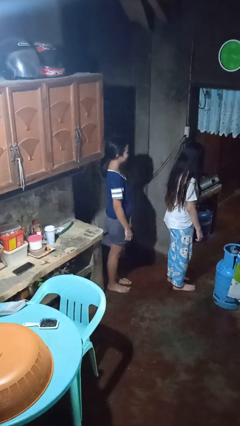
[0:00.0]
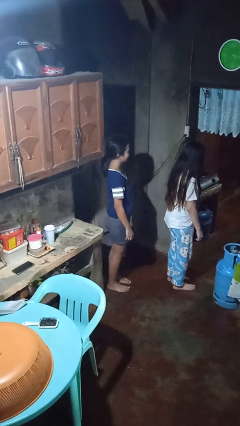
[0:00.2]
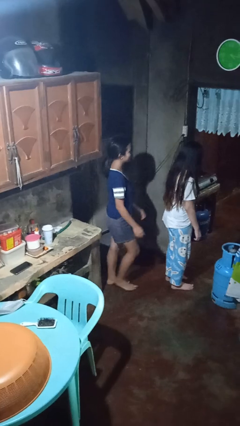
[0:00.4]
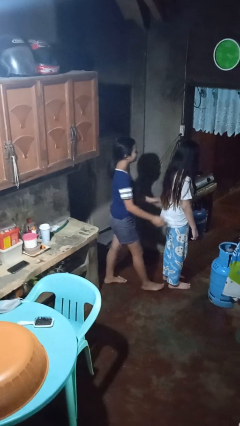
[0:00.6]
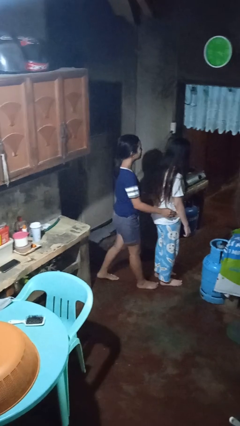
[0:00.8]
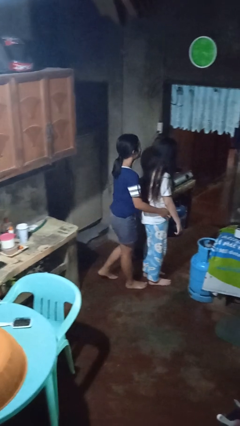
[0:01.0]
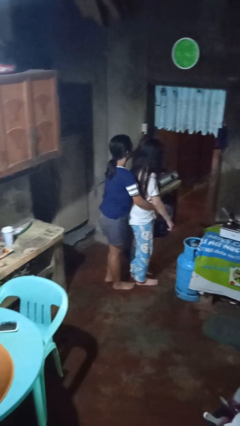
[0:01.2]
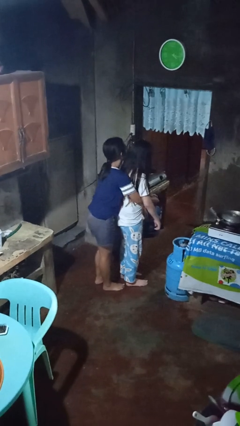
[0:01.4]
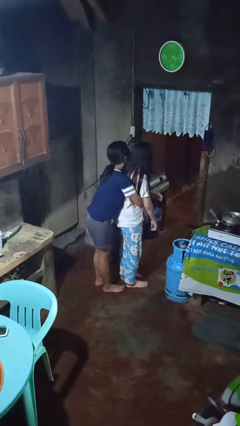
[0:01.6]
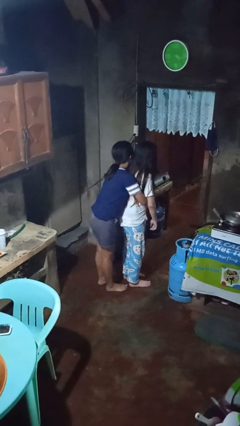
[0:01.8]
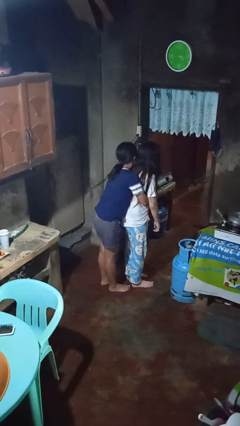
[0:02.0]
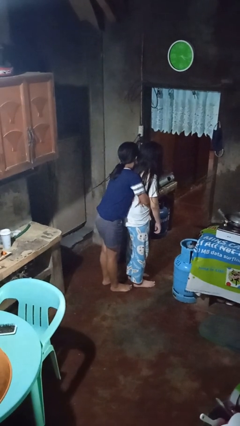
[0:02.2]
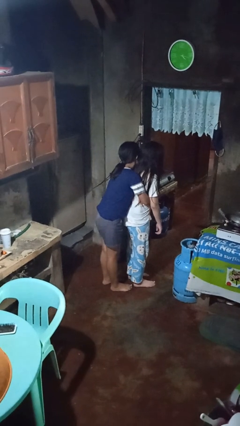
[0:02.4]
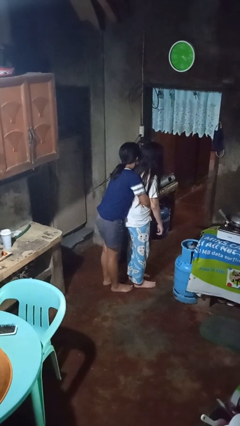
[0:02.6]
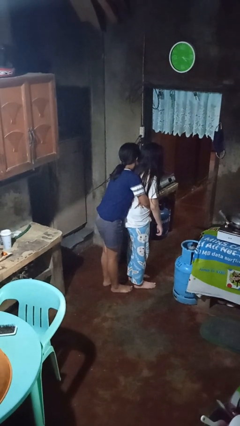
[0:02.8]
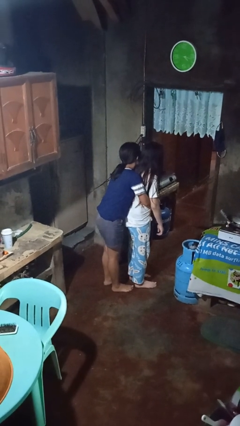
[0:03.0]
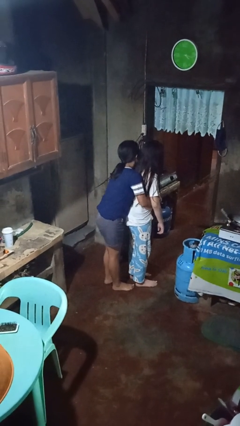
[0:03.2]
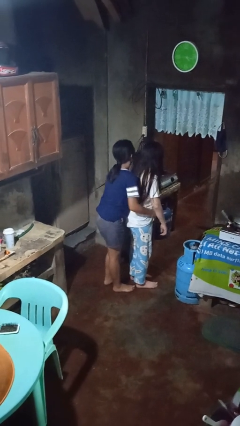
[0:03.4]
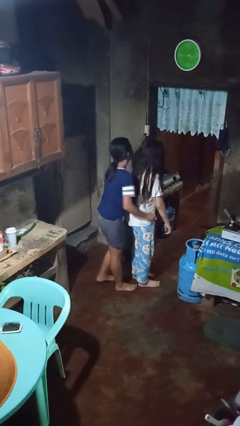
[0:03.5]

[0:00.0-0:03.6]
person hugs person from behind

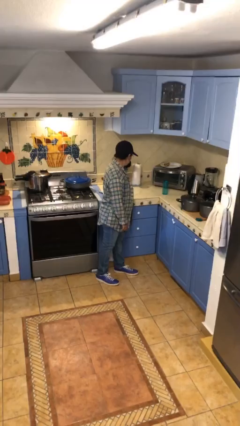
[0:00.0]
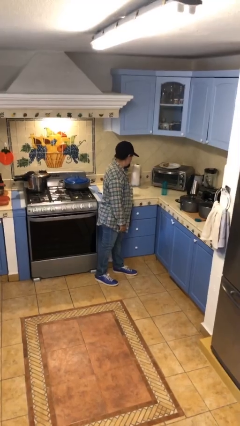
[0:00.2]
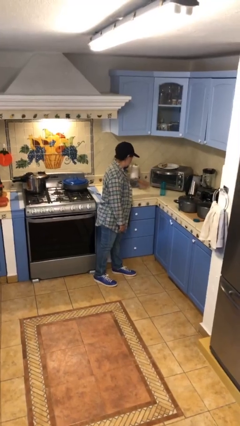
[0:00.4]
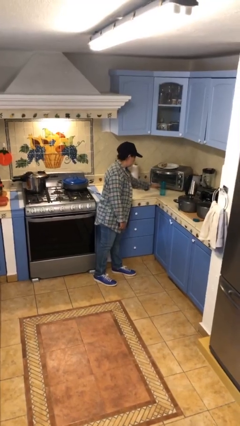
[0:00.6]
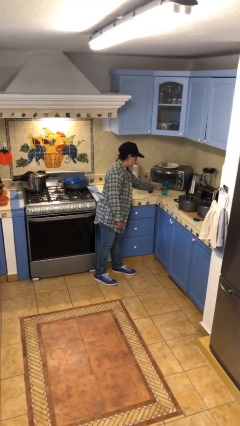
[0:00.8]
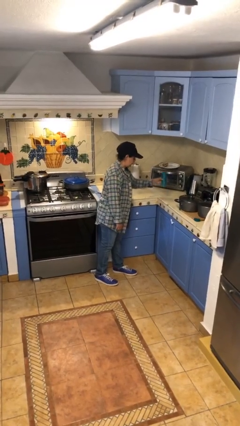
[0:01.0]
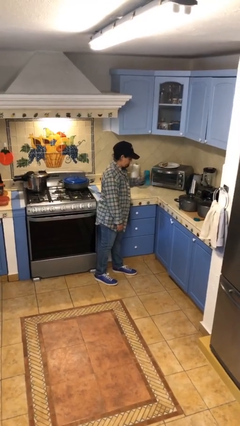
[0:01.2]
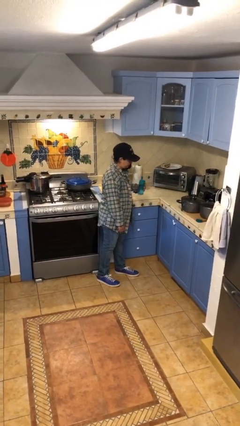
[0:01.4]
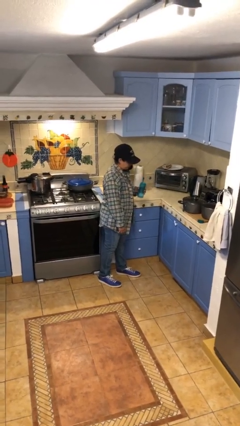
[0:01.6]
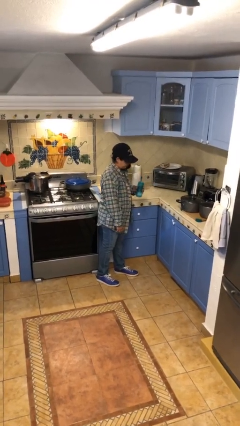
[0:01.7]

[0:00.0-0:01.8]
person picks up object from countertop

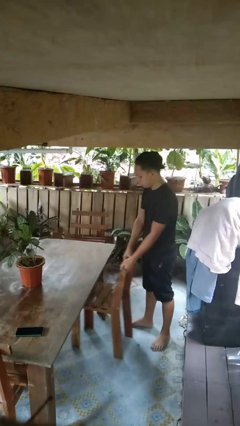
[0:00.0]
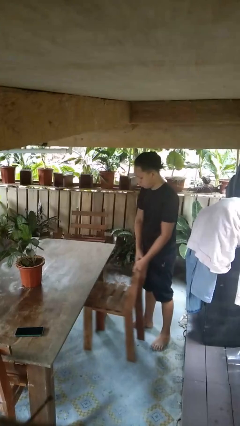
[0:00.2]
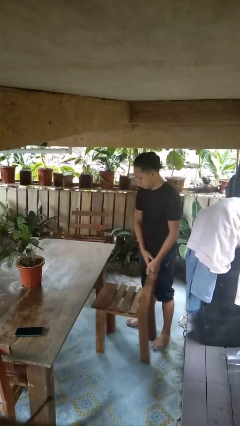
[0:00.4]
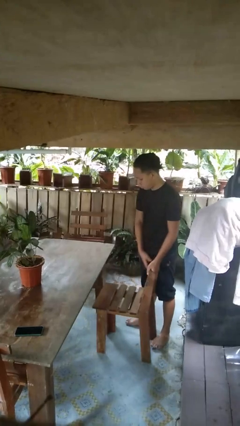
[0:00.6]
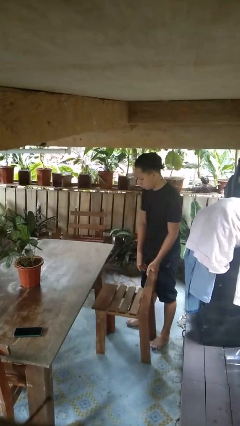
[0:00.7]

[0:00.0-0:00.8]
person pulls out chair

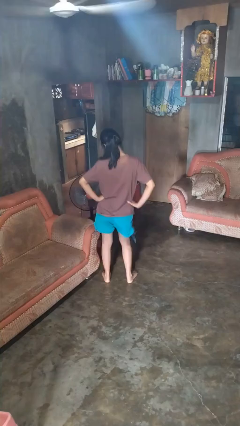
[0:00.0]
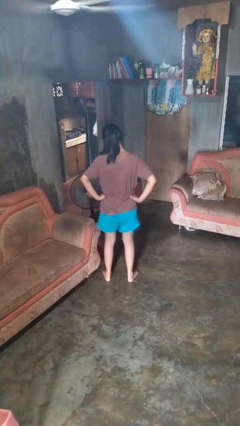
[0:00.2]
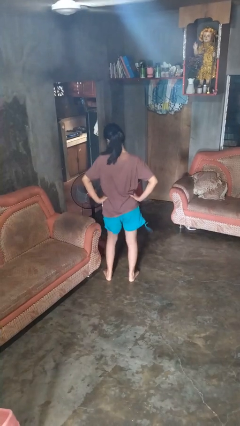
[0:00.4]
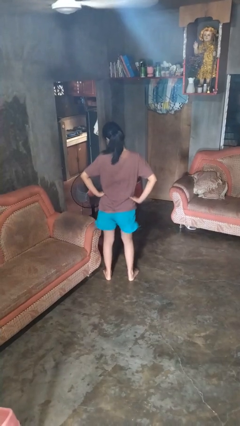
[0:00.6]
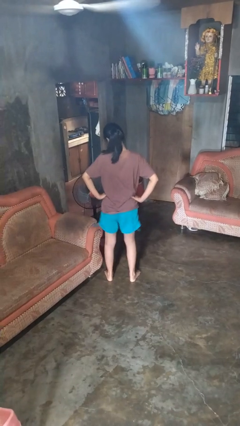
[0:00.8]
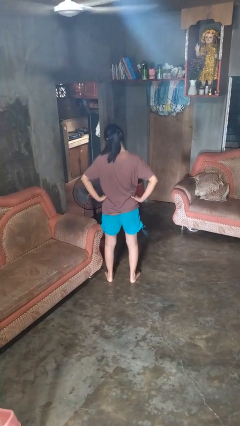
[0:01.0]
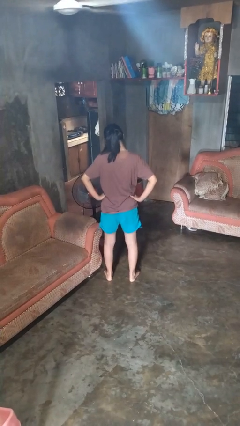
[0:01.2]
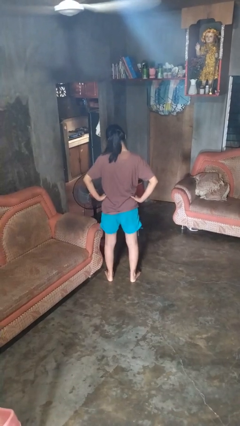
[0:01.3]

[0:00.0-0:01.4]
person wiggles hips

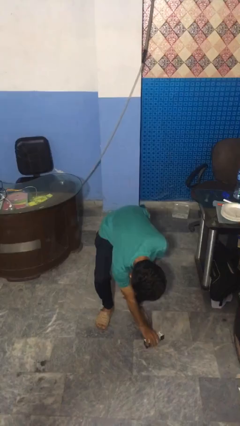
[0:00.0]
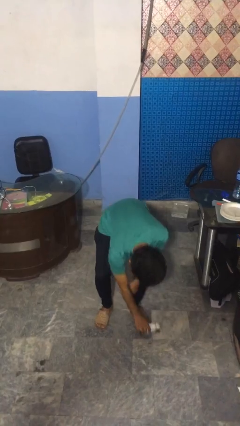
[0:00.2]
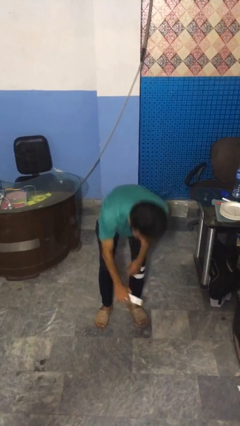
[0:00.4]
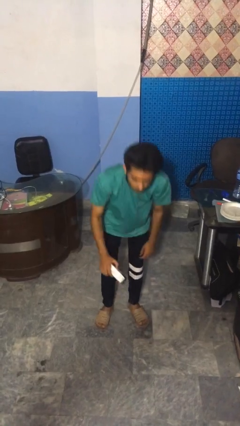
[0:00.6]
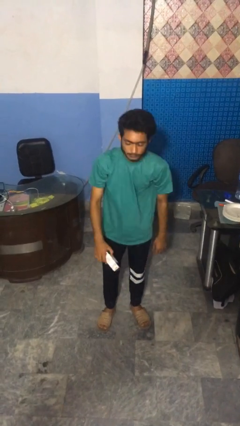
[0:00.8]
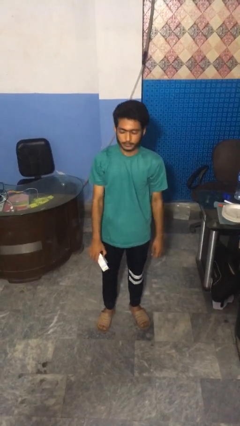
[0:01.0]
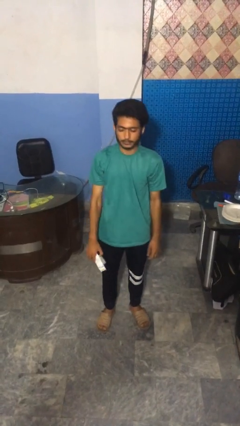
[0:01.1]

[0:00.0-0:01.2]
person picks up object from floor

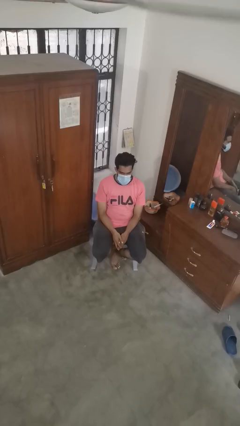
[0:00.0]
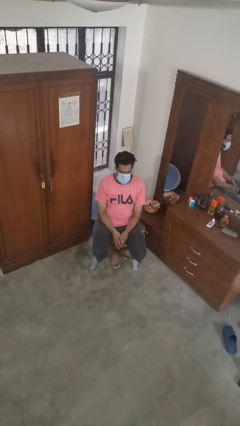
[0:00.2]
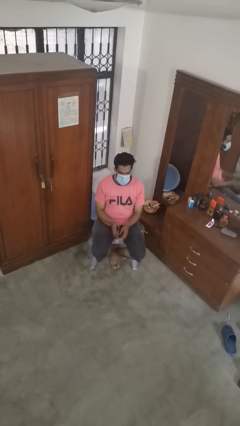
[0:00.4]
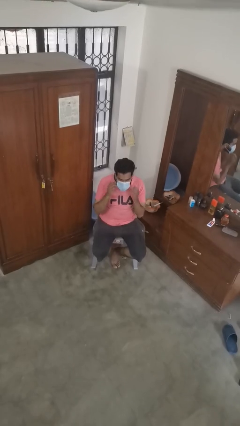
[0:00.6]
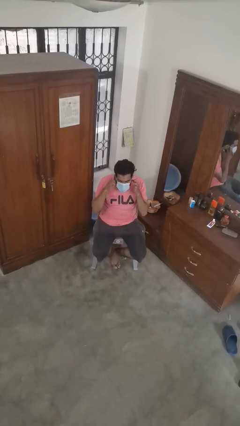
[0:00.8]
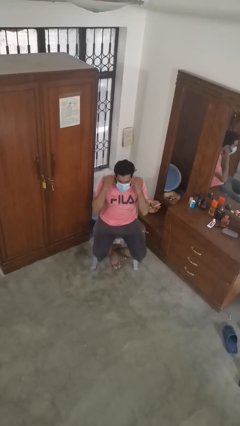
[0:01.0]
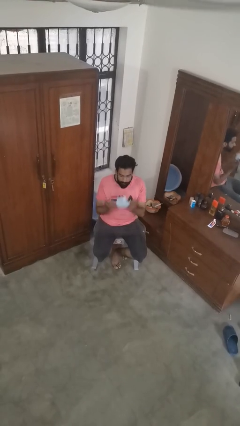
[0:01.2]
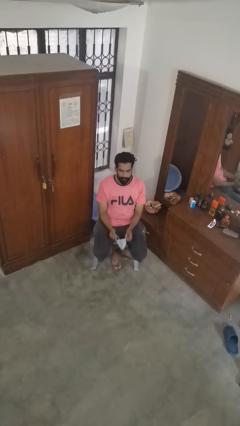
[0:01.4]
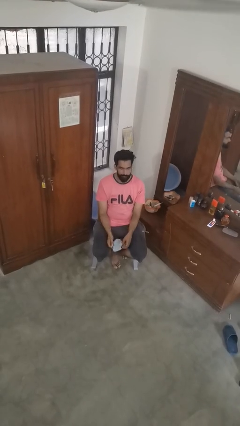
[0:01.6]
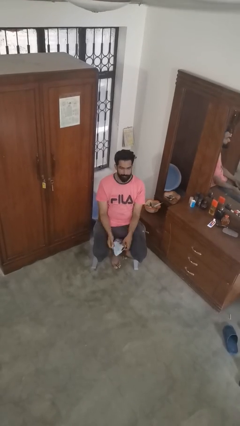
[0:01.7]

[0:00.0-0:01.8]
person takes off facemask

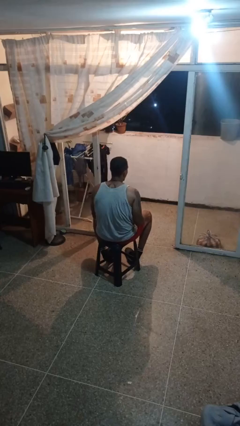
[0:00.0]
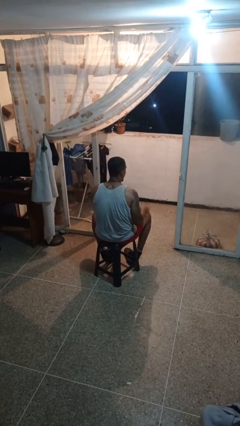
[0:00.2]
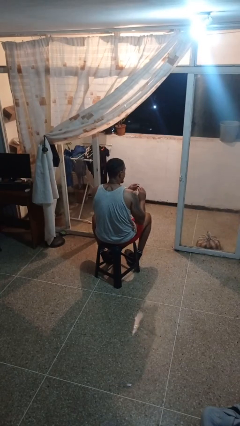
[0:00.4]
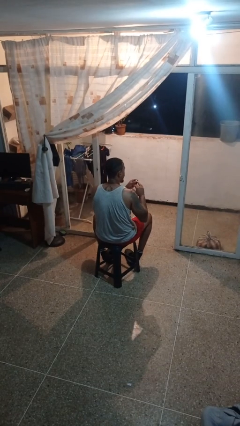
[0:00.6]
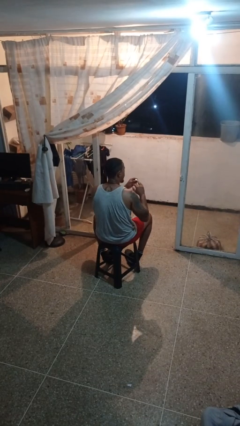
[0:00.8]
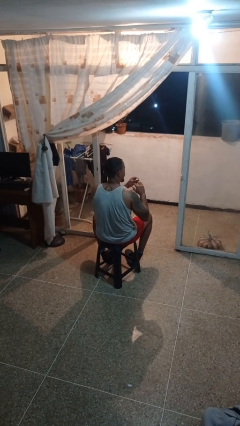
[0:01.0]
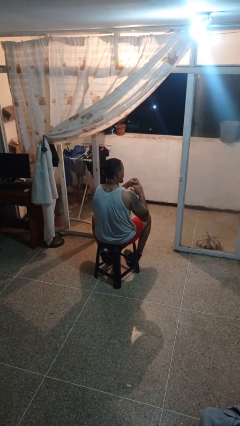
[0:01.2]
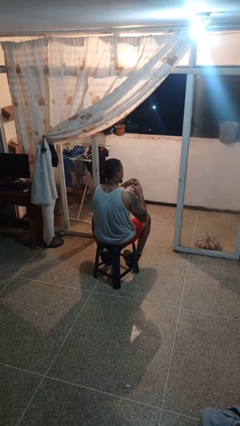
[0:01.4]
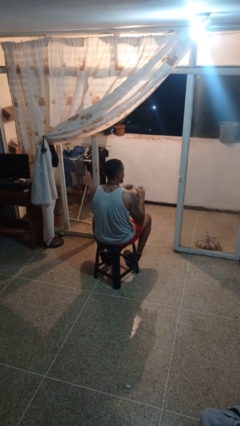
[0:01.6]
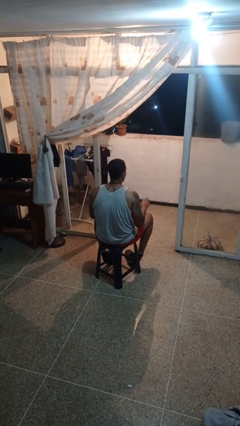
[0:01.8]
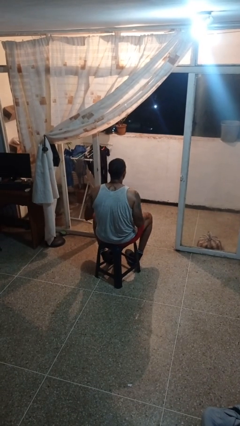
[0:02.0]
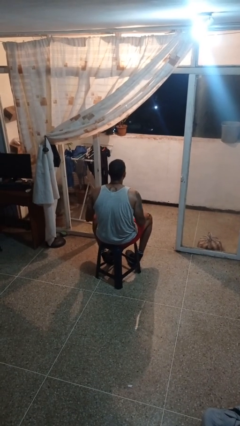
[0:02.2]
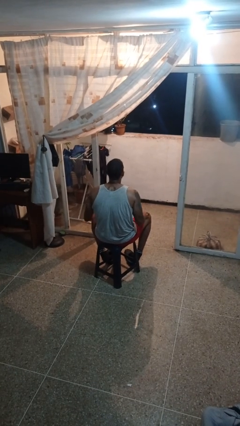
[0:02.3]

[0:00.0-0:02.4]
person puts on ring

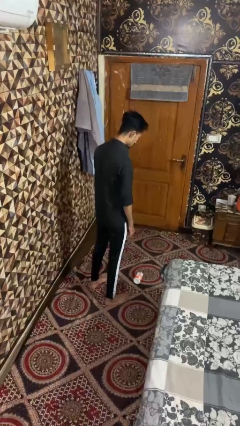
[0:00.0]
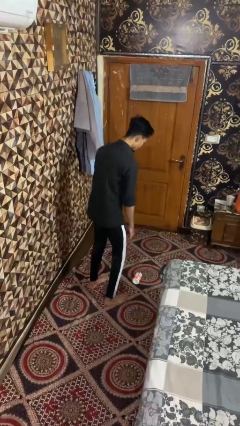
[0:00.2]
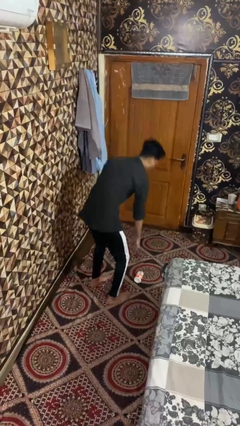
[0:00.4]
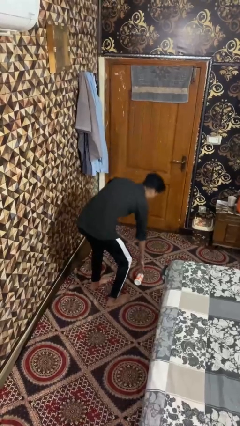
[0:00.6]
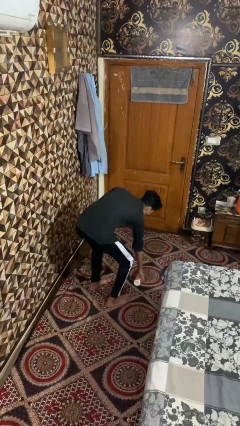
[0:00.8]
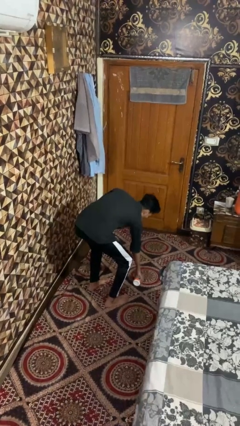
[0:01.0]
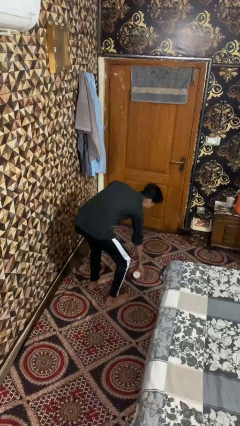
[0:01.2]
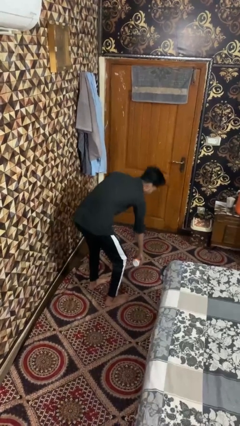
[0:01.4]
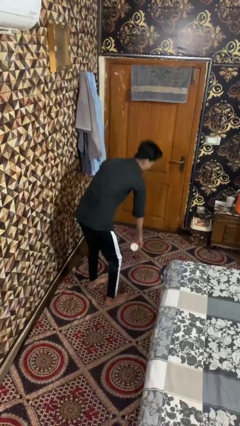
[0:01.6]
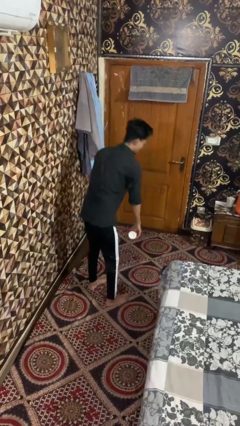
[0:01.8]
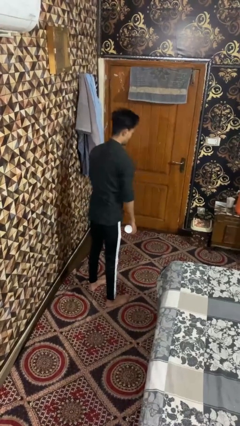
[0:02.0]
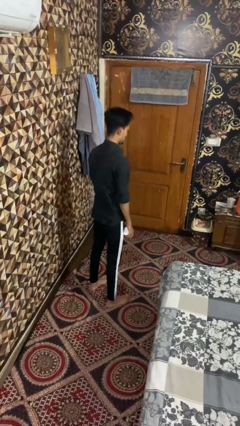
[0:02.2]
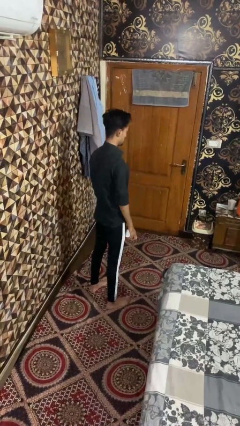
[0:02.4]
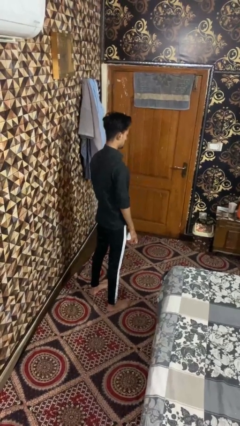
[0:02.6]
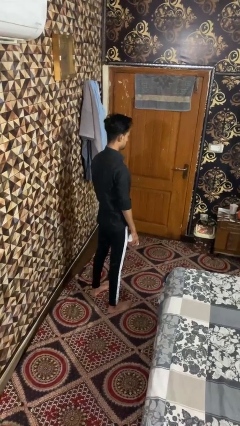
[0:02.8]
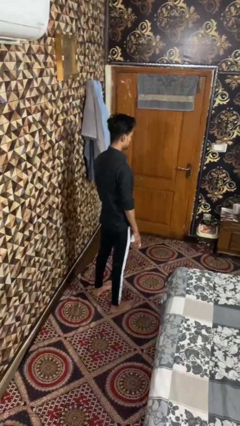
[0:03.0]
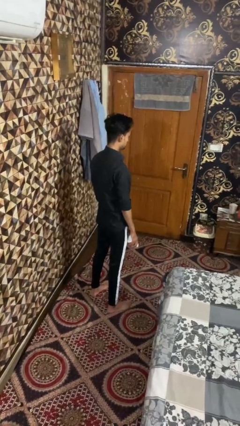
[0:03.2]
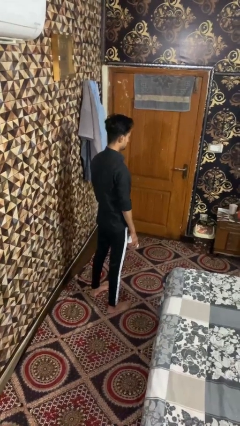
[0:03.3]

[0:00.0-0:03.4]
person stands up from floor

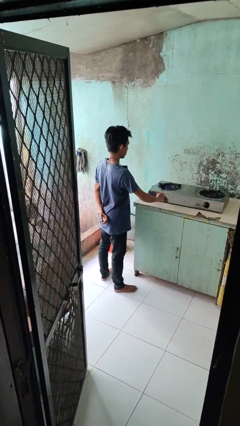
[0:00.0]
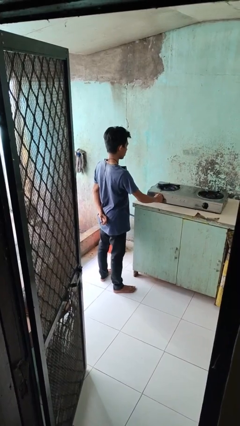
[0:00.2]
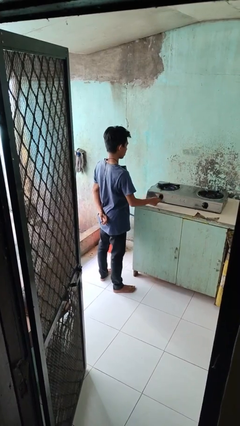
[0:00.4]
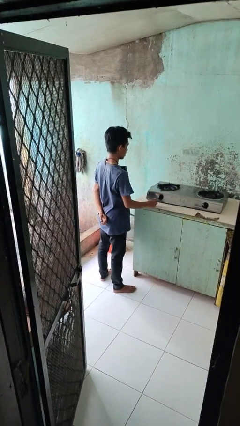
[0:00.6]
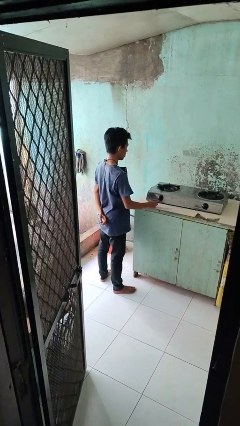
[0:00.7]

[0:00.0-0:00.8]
person turns off stovetop
